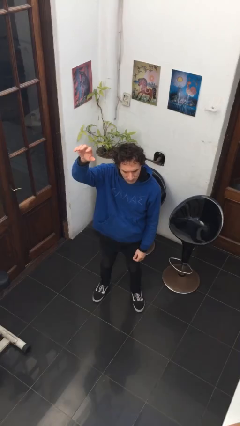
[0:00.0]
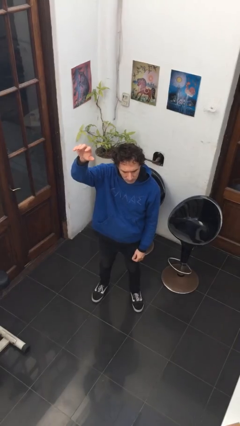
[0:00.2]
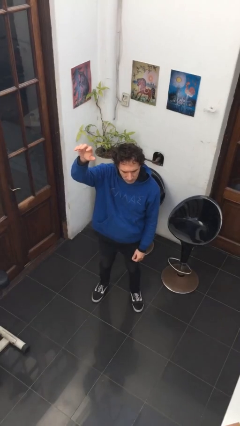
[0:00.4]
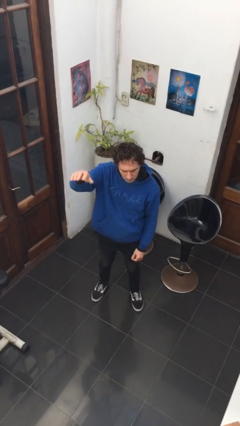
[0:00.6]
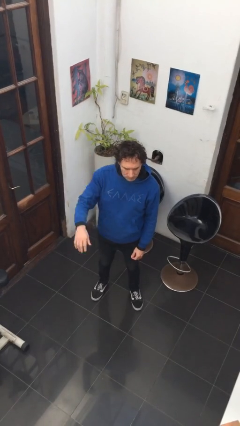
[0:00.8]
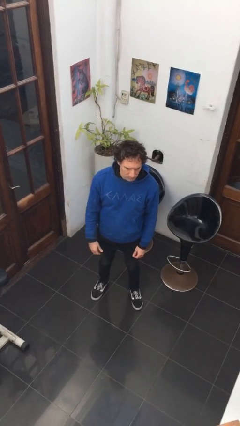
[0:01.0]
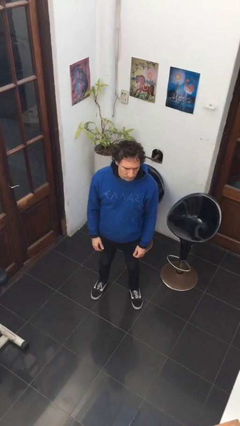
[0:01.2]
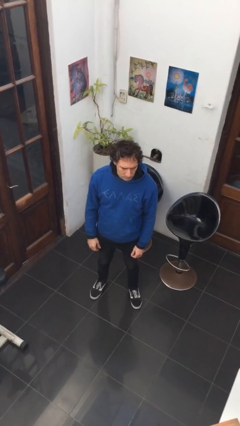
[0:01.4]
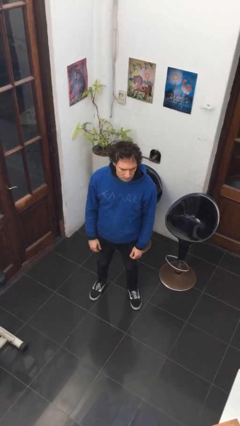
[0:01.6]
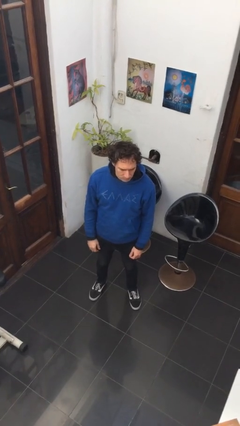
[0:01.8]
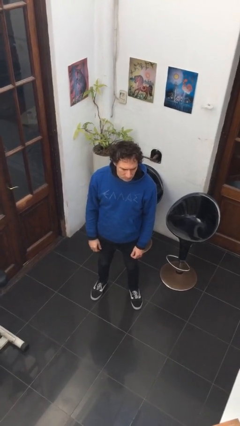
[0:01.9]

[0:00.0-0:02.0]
person gestures swipe down

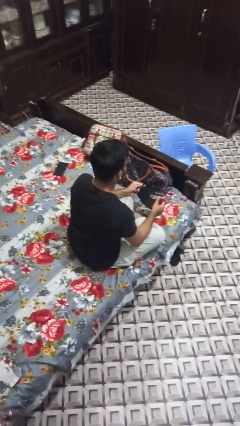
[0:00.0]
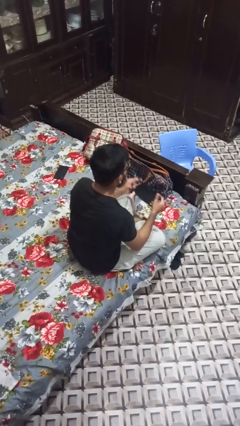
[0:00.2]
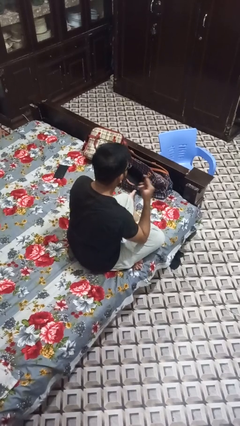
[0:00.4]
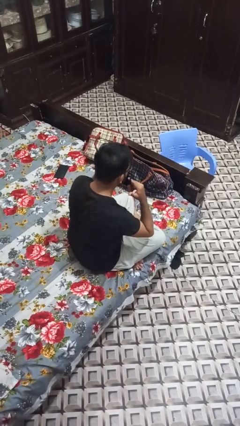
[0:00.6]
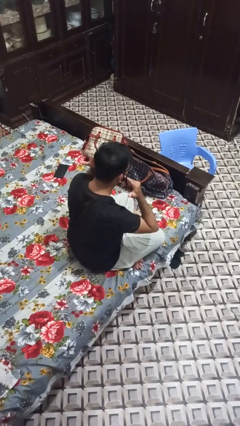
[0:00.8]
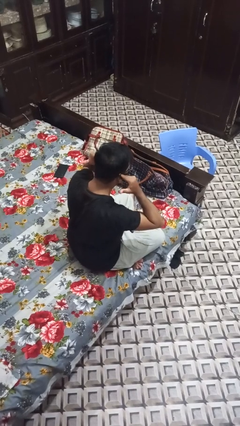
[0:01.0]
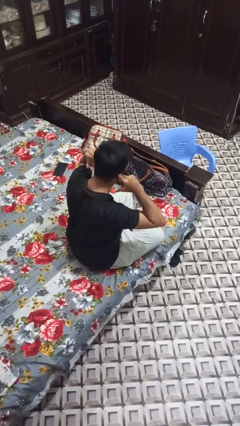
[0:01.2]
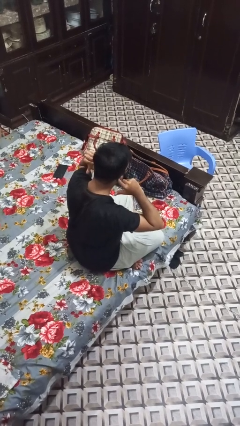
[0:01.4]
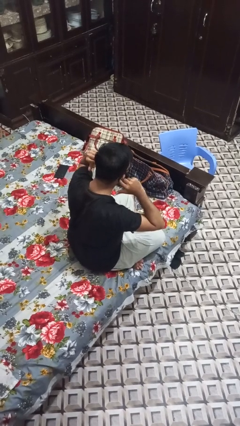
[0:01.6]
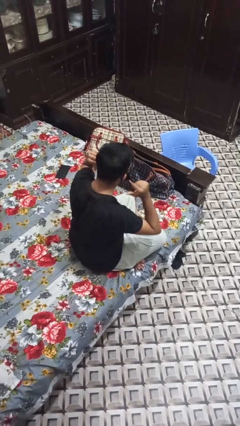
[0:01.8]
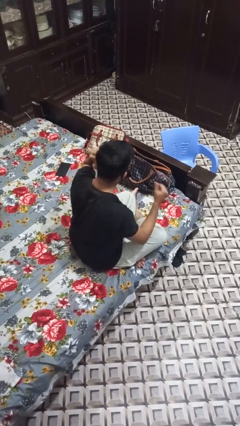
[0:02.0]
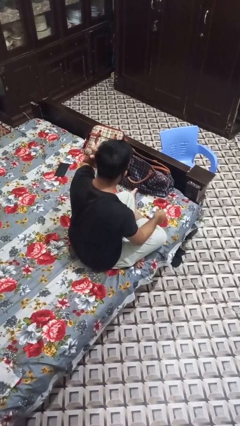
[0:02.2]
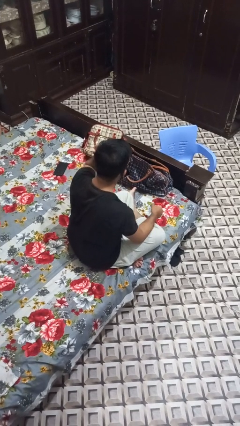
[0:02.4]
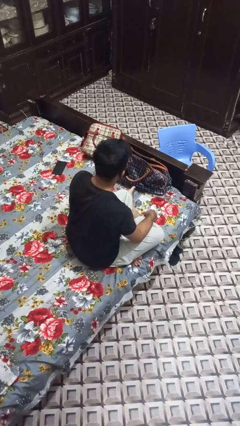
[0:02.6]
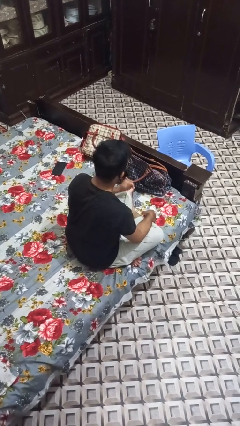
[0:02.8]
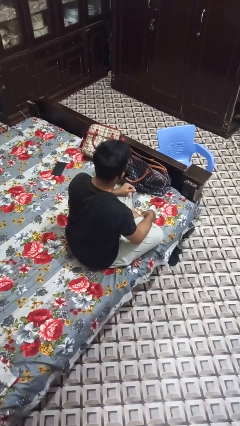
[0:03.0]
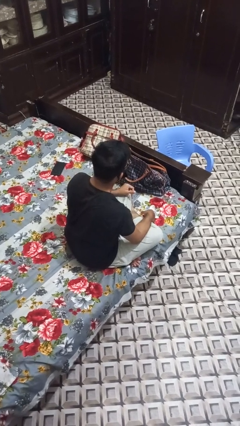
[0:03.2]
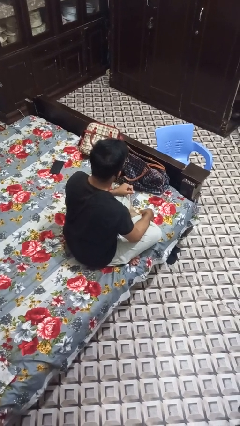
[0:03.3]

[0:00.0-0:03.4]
person puts on facemask

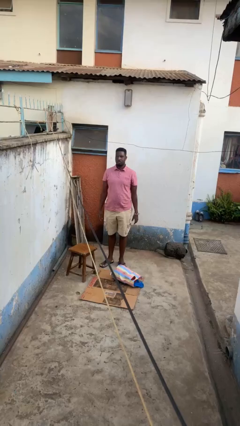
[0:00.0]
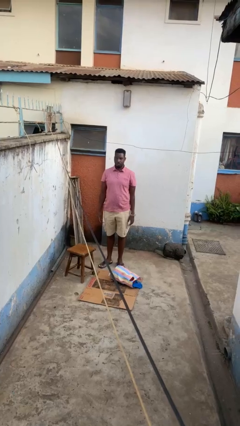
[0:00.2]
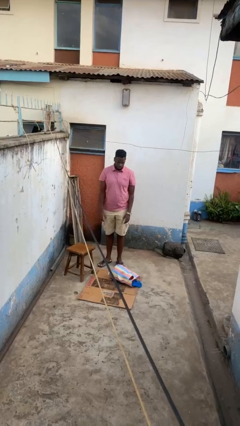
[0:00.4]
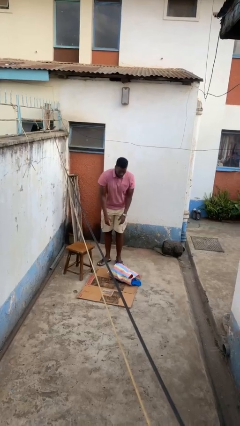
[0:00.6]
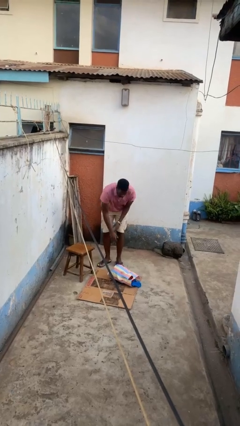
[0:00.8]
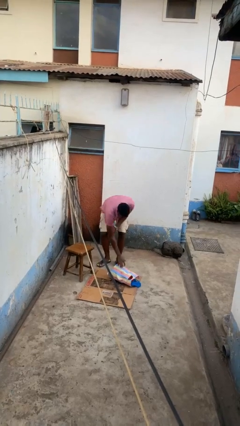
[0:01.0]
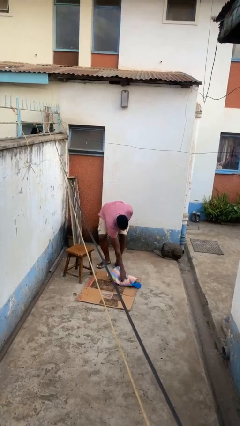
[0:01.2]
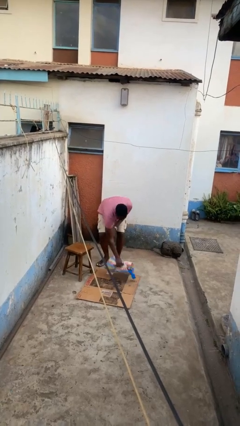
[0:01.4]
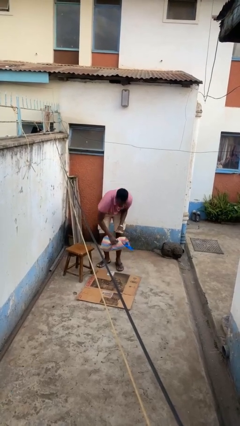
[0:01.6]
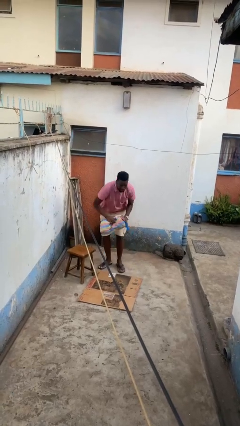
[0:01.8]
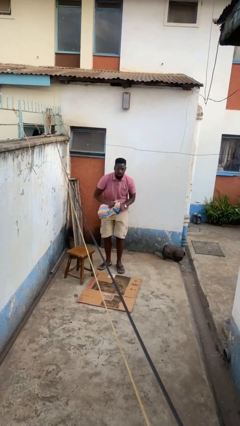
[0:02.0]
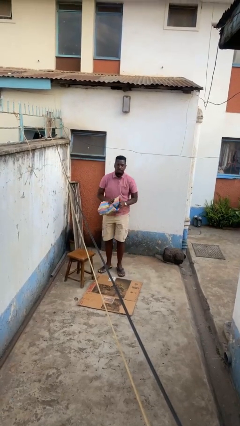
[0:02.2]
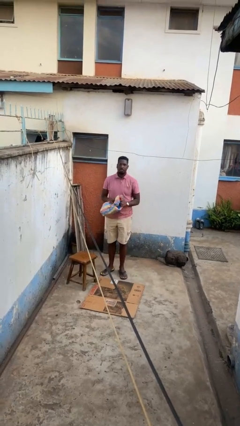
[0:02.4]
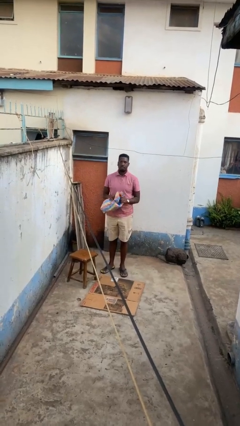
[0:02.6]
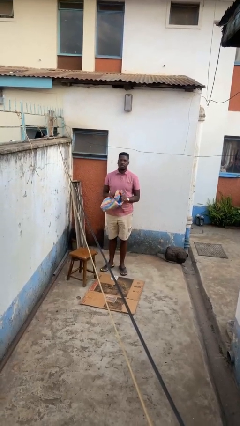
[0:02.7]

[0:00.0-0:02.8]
person picks up object from floor

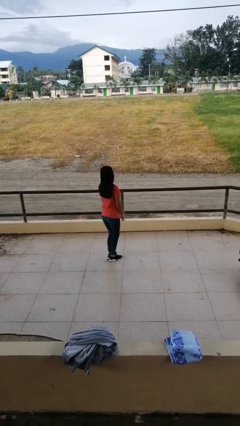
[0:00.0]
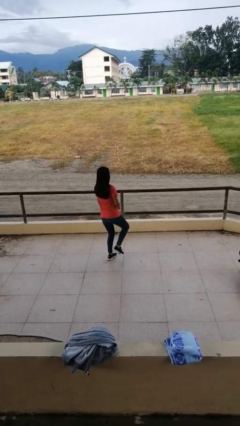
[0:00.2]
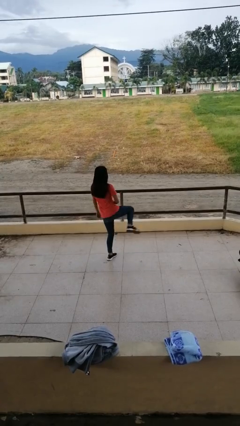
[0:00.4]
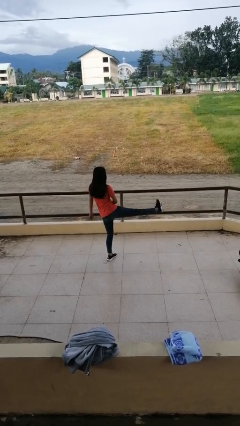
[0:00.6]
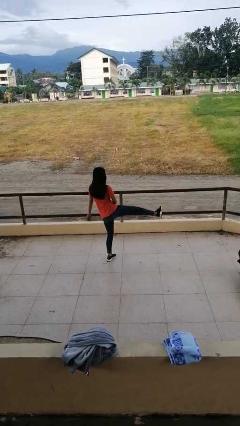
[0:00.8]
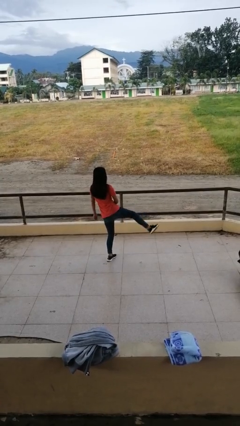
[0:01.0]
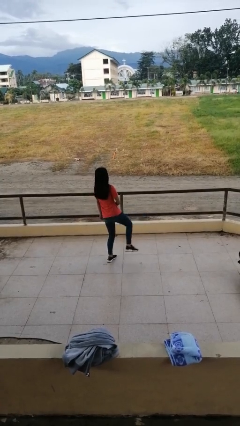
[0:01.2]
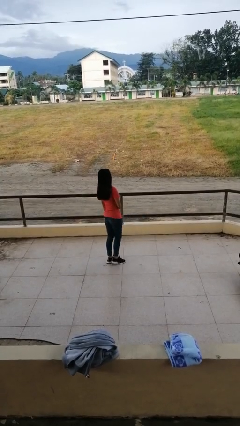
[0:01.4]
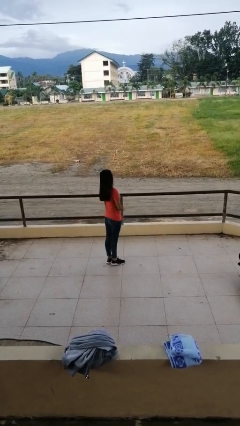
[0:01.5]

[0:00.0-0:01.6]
person karate kicks

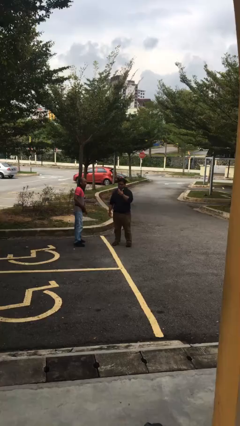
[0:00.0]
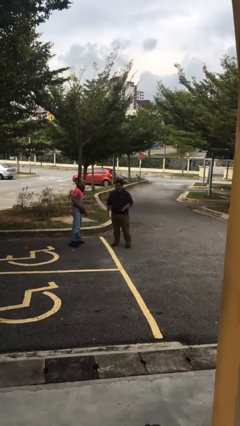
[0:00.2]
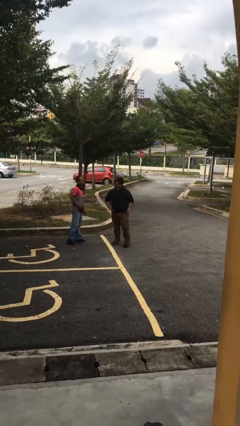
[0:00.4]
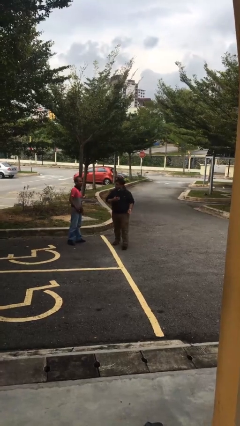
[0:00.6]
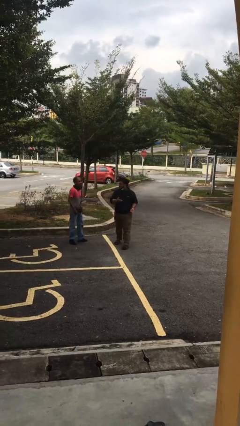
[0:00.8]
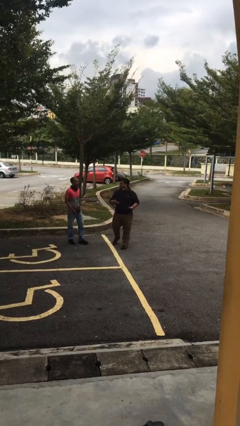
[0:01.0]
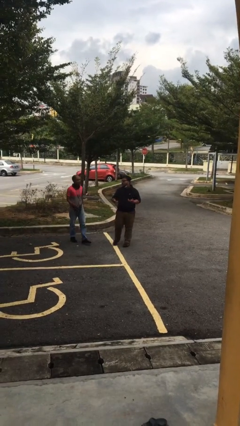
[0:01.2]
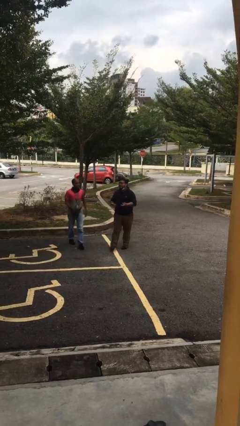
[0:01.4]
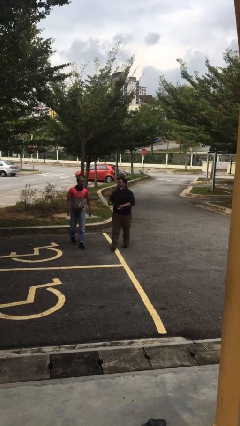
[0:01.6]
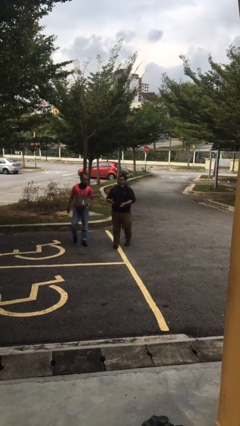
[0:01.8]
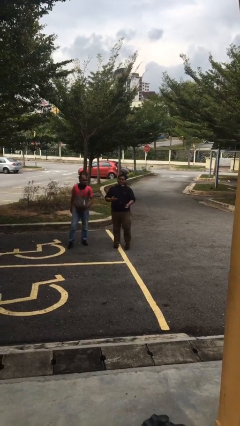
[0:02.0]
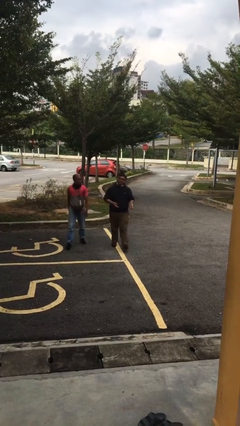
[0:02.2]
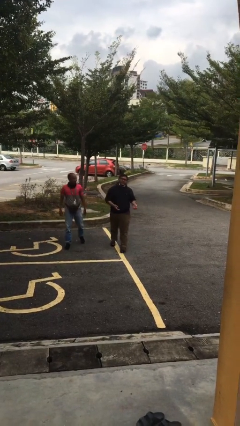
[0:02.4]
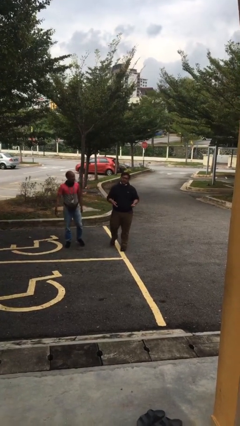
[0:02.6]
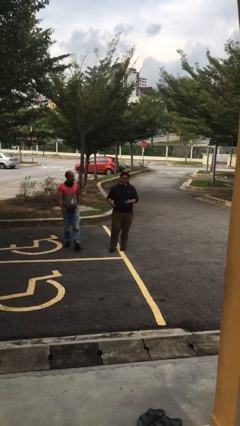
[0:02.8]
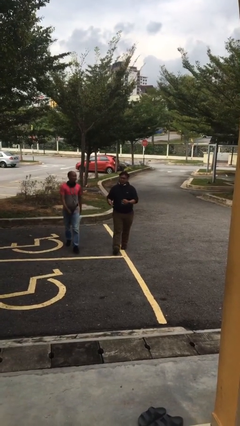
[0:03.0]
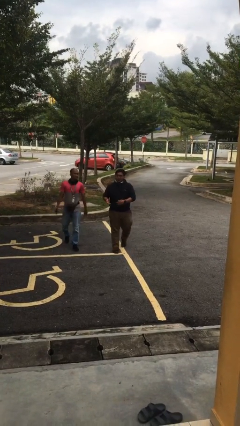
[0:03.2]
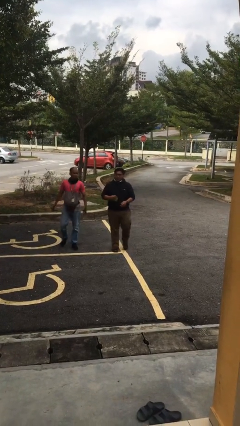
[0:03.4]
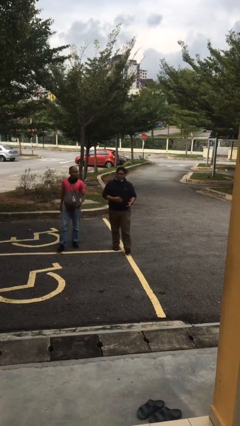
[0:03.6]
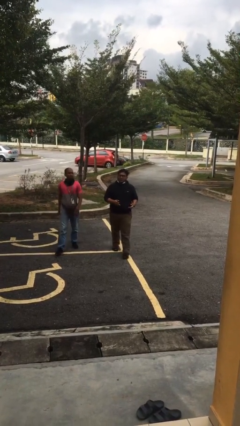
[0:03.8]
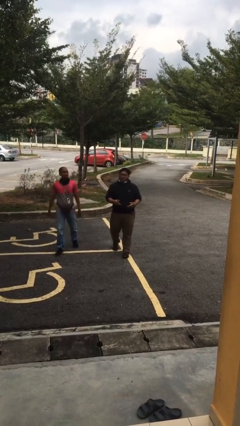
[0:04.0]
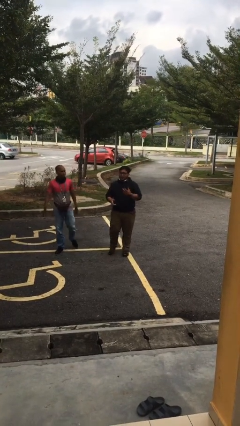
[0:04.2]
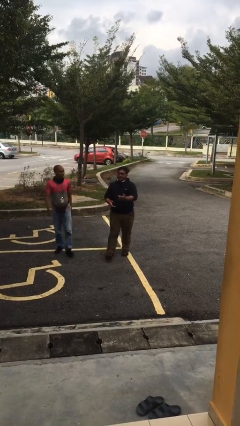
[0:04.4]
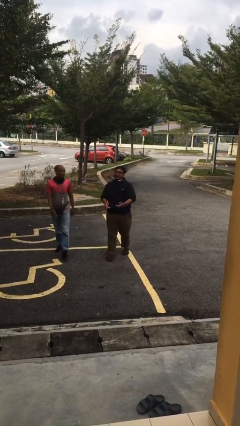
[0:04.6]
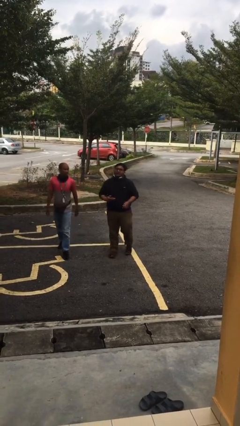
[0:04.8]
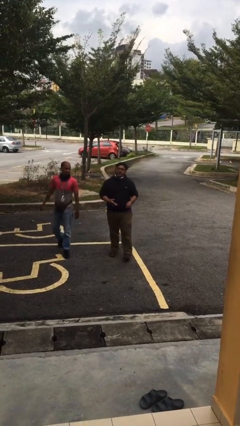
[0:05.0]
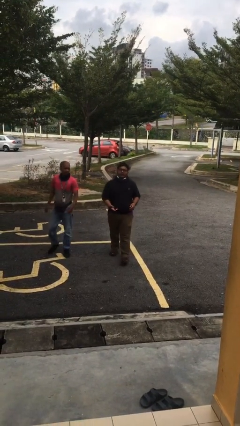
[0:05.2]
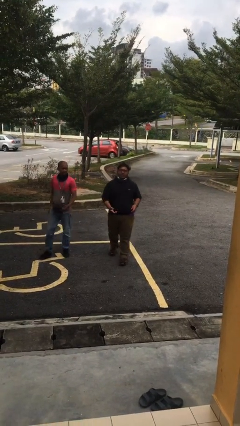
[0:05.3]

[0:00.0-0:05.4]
person talks to person

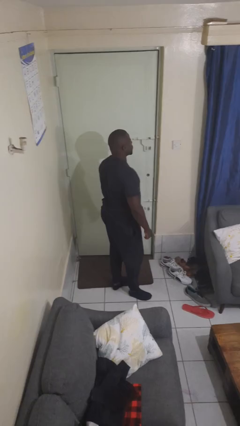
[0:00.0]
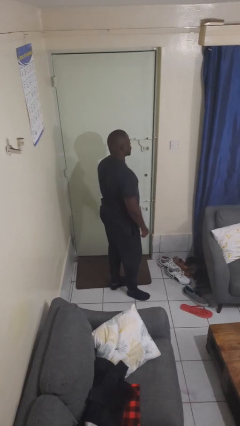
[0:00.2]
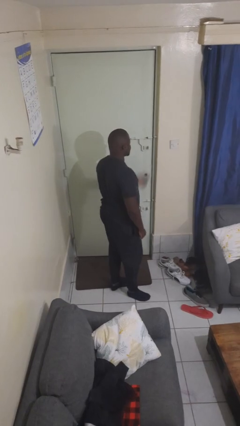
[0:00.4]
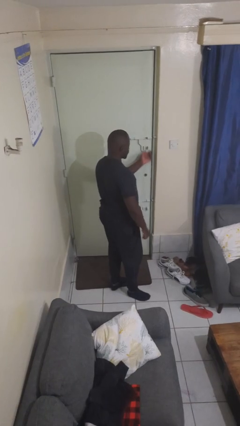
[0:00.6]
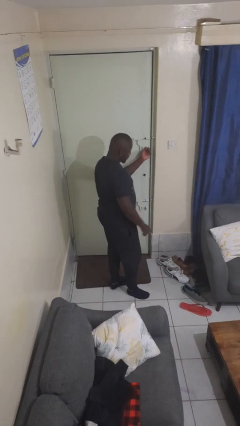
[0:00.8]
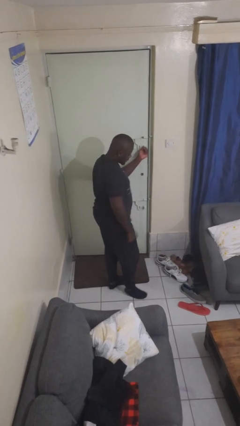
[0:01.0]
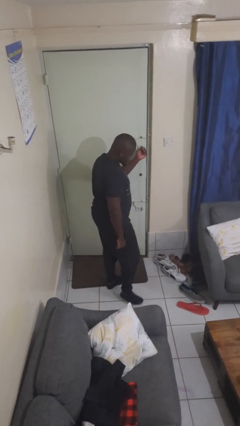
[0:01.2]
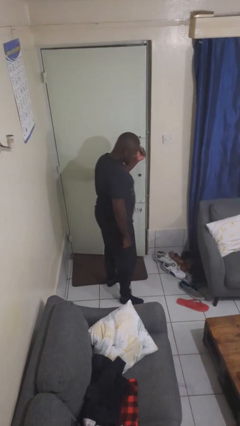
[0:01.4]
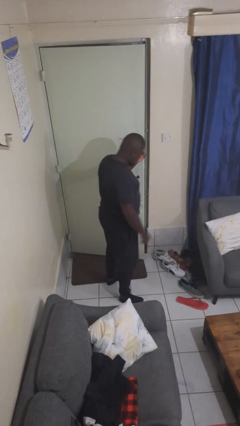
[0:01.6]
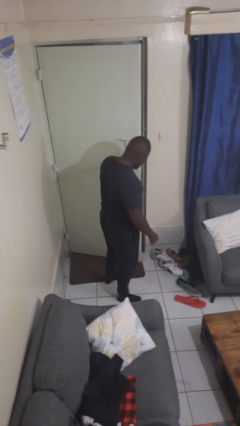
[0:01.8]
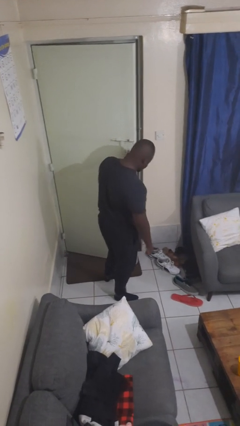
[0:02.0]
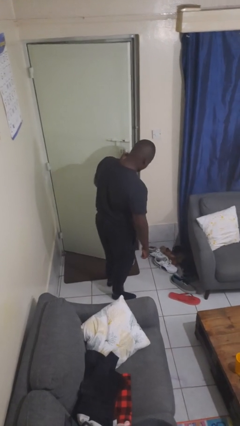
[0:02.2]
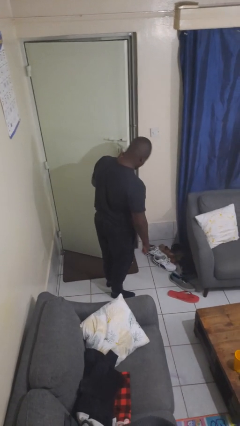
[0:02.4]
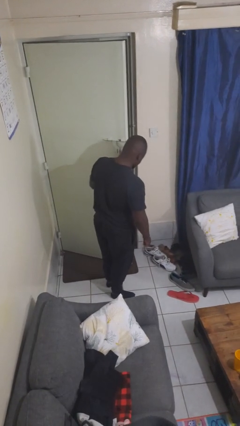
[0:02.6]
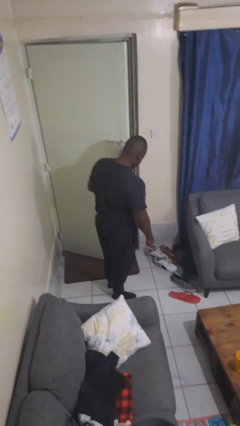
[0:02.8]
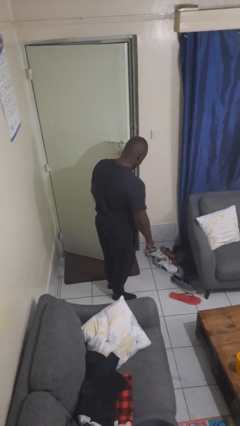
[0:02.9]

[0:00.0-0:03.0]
person opens facility door
